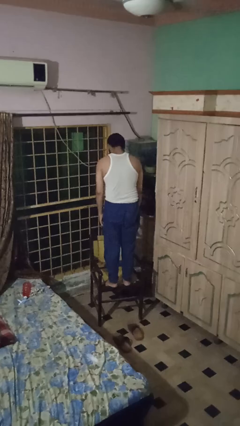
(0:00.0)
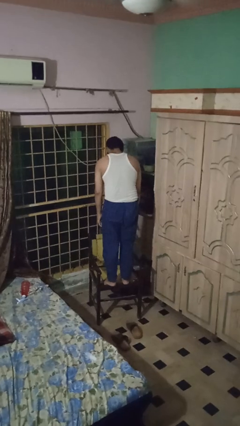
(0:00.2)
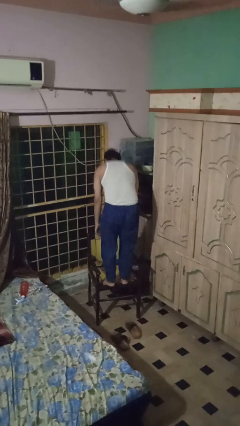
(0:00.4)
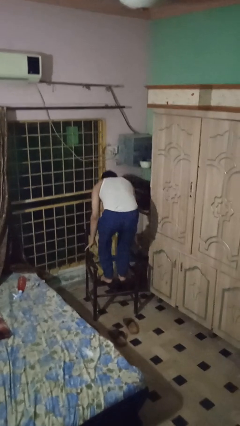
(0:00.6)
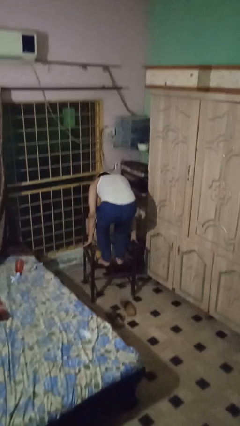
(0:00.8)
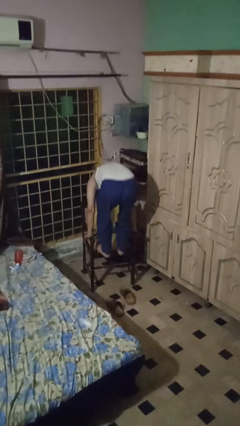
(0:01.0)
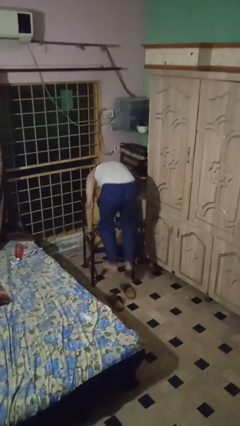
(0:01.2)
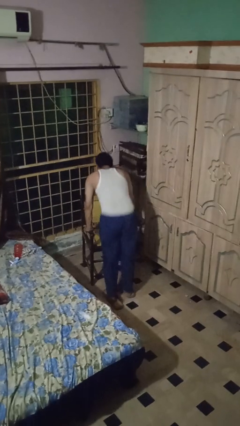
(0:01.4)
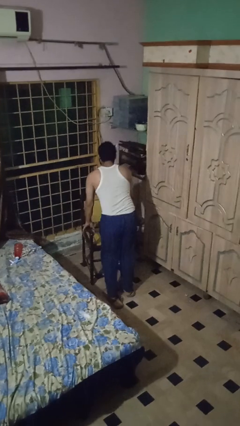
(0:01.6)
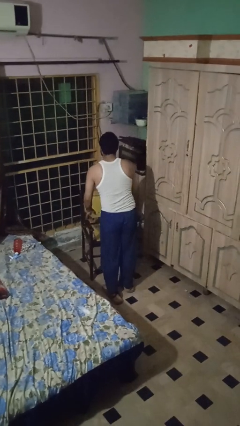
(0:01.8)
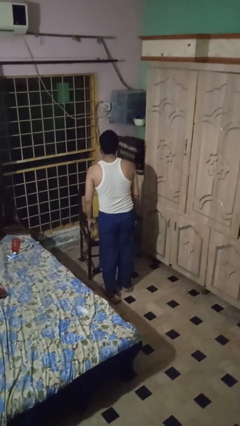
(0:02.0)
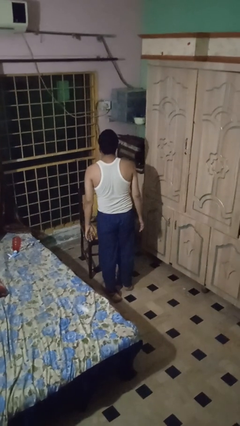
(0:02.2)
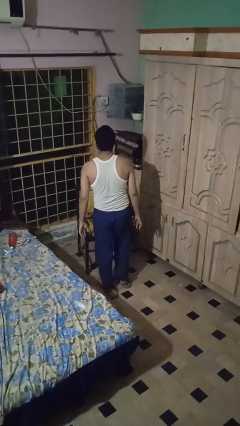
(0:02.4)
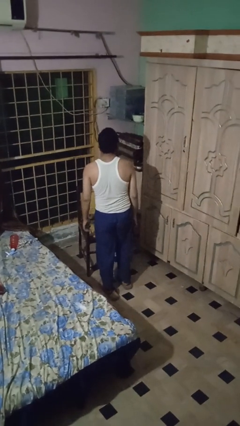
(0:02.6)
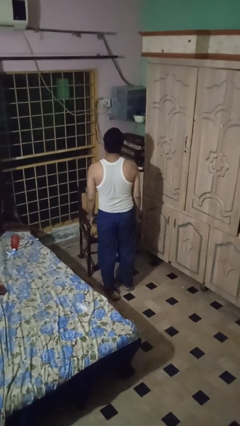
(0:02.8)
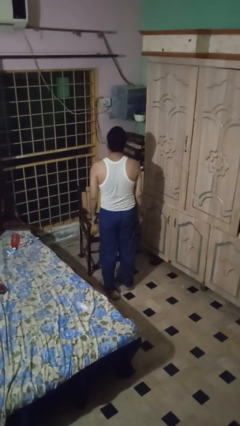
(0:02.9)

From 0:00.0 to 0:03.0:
person climbs off chair

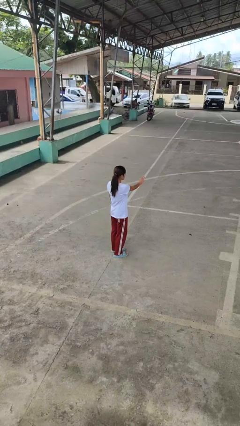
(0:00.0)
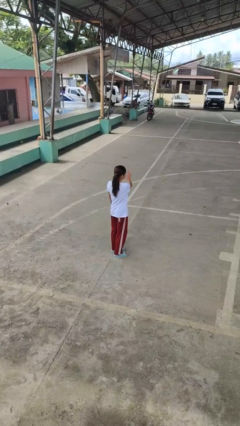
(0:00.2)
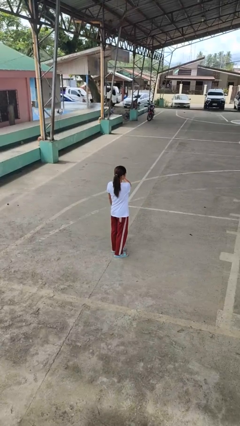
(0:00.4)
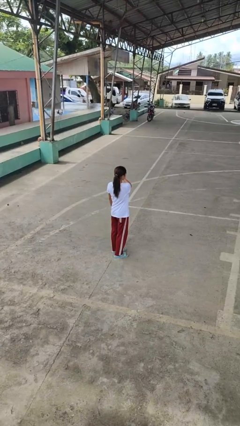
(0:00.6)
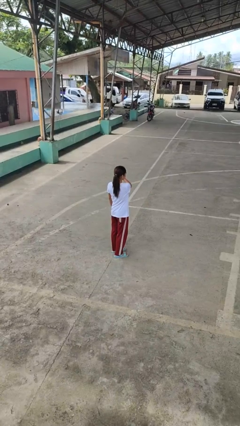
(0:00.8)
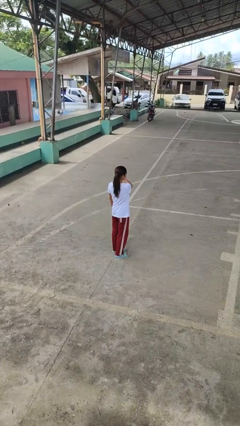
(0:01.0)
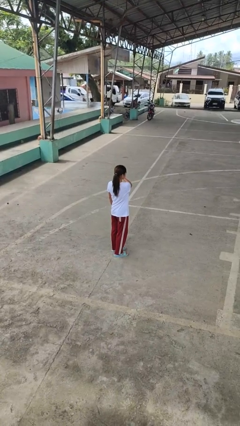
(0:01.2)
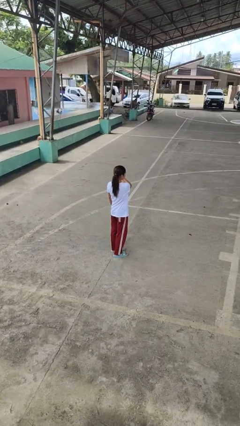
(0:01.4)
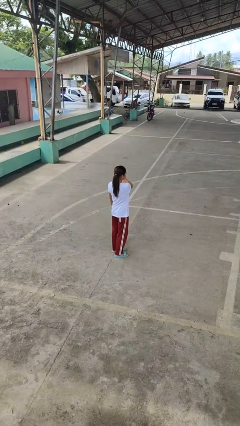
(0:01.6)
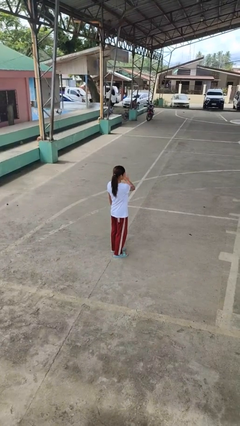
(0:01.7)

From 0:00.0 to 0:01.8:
person gestures swipe left

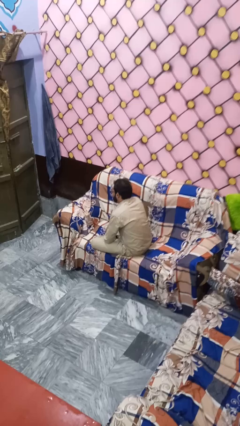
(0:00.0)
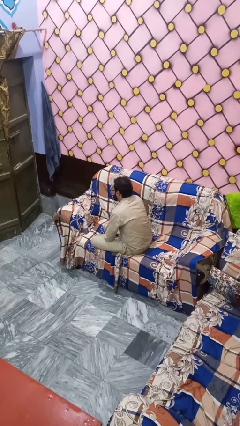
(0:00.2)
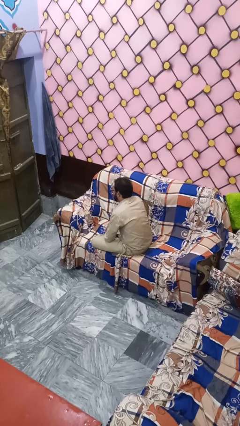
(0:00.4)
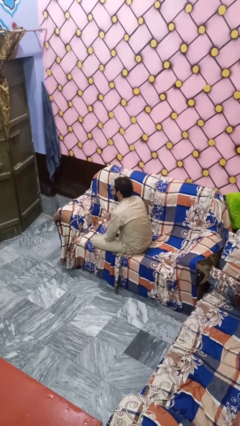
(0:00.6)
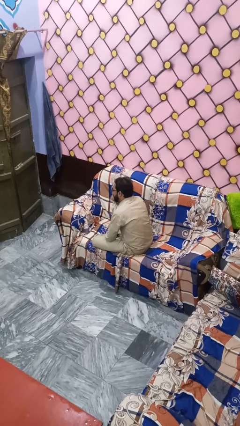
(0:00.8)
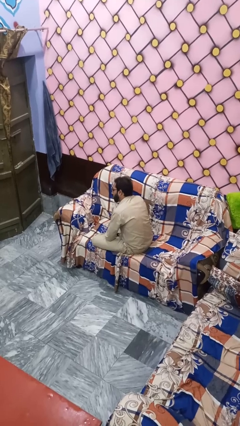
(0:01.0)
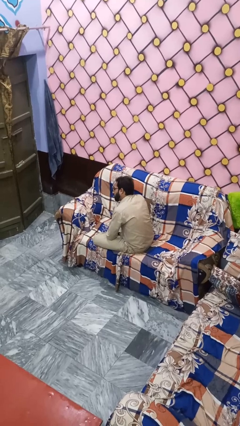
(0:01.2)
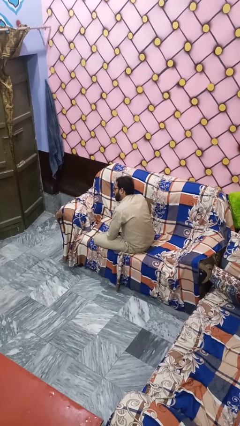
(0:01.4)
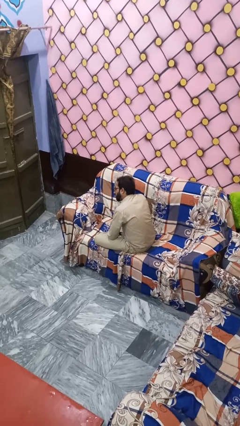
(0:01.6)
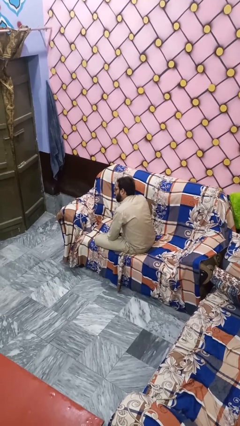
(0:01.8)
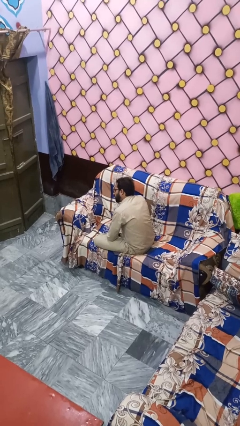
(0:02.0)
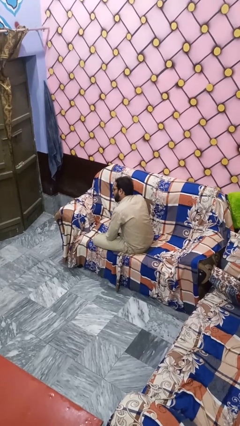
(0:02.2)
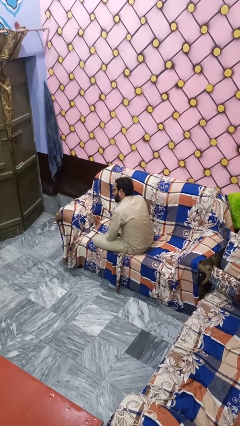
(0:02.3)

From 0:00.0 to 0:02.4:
person sticks out tongue

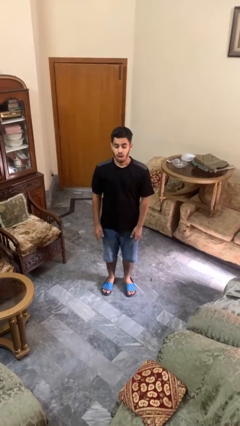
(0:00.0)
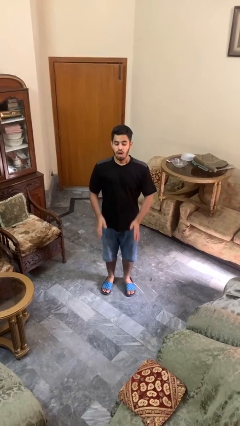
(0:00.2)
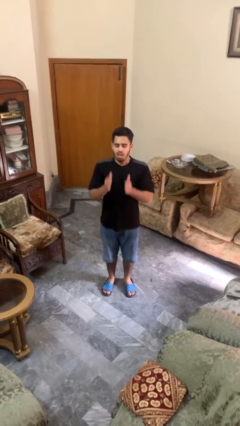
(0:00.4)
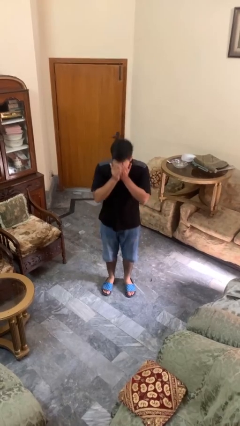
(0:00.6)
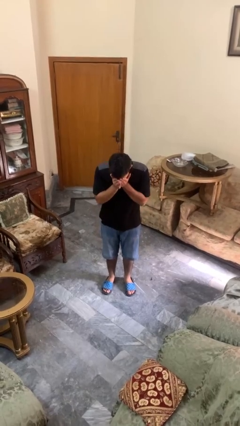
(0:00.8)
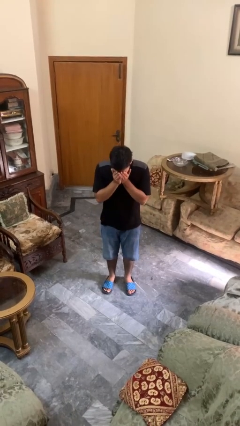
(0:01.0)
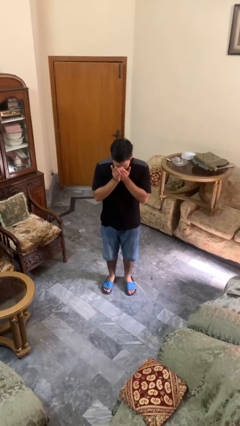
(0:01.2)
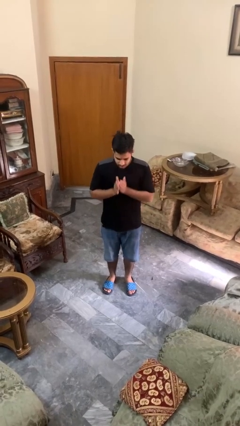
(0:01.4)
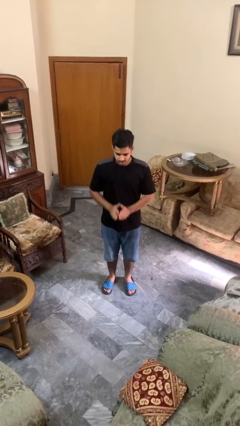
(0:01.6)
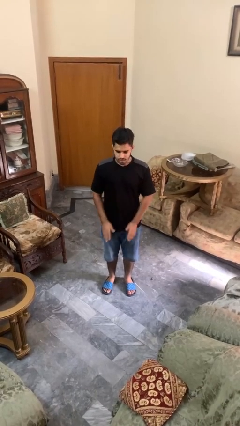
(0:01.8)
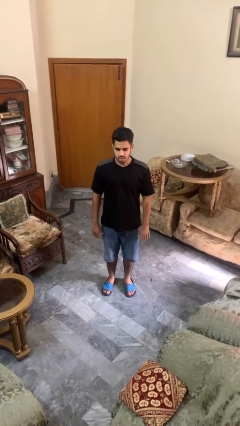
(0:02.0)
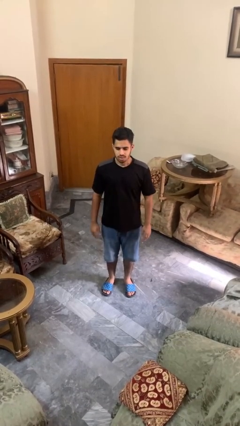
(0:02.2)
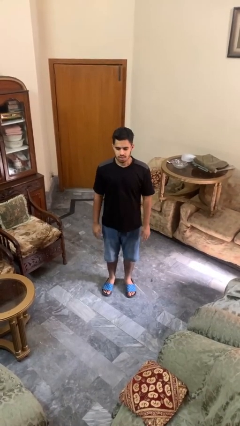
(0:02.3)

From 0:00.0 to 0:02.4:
person sneezes into hand

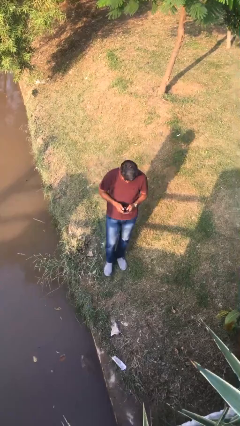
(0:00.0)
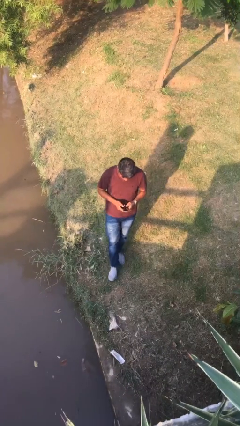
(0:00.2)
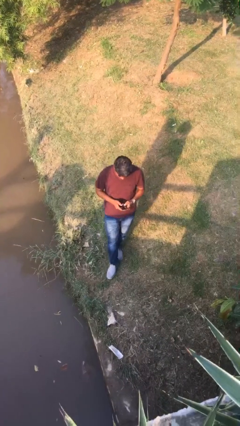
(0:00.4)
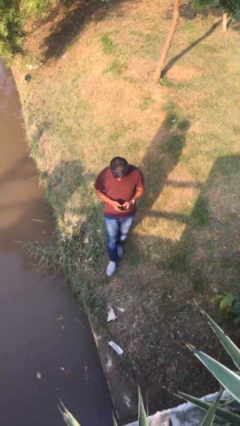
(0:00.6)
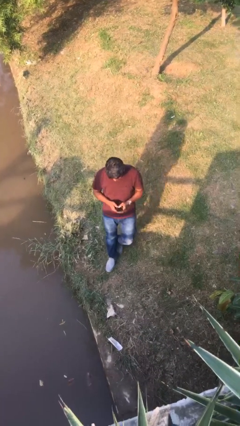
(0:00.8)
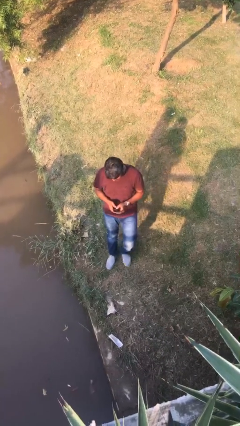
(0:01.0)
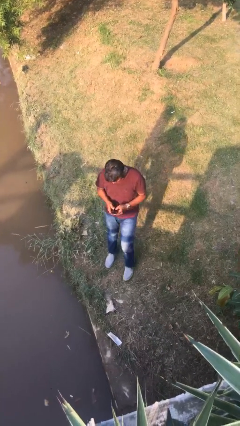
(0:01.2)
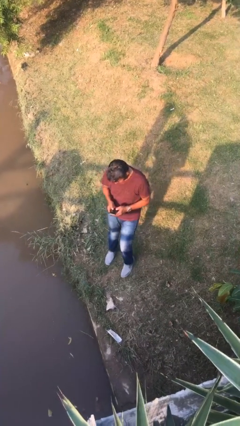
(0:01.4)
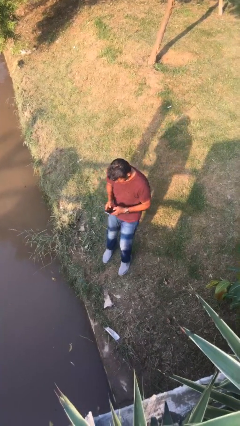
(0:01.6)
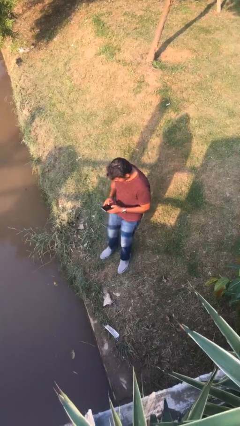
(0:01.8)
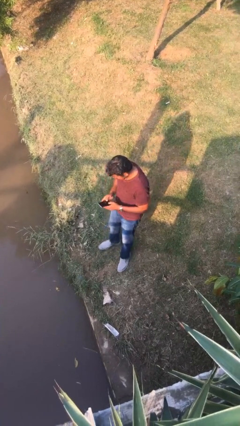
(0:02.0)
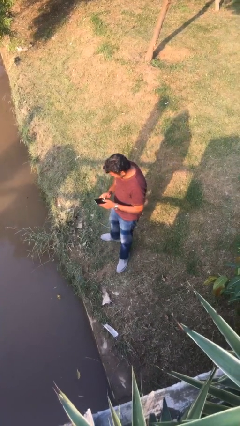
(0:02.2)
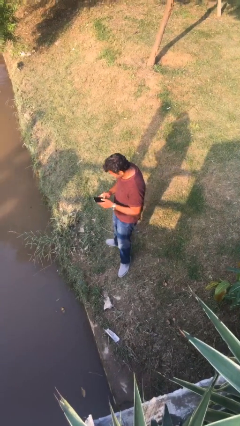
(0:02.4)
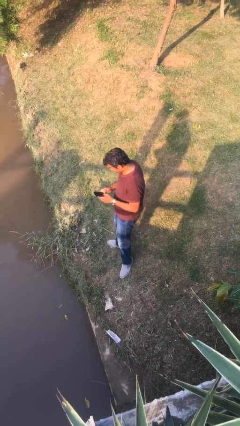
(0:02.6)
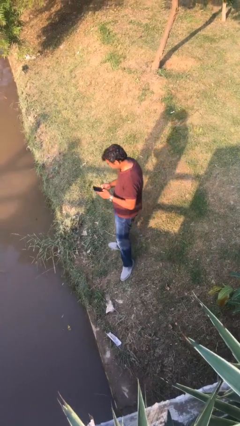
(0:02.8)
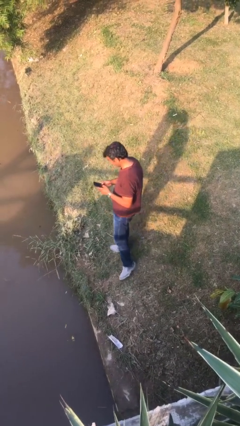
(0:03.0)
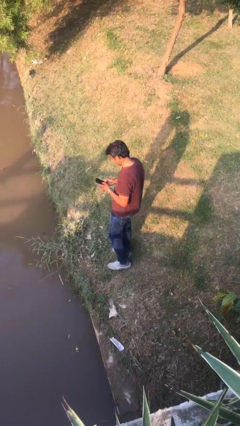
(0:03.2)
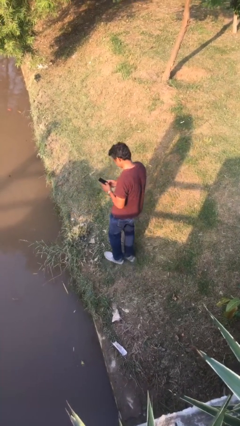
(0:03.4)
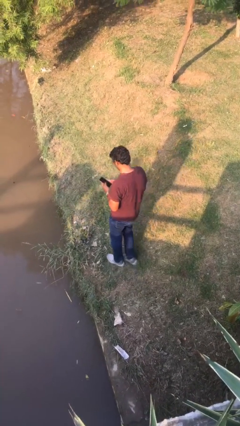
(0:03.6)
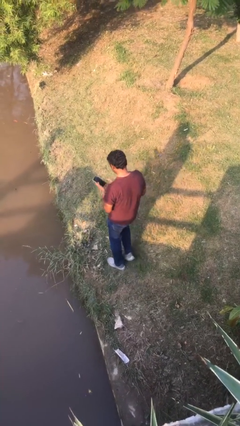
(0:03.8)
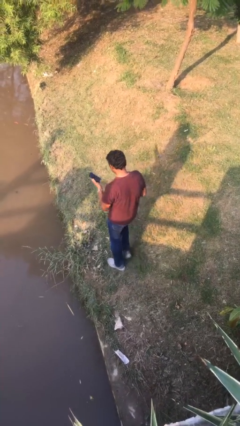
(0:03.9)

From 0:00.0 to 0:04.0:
person texts on phone

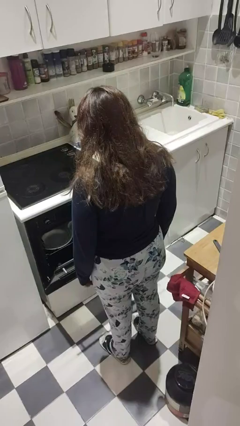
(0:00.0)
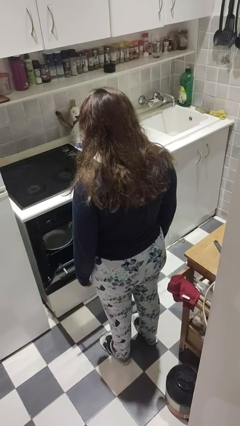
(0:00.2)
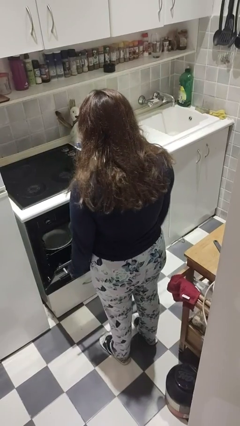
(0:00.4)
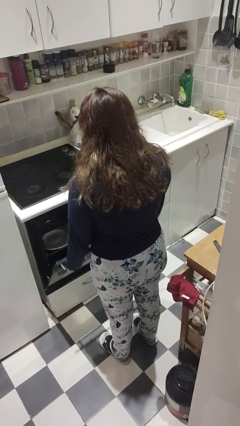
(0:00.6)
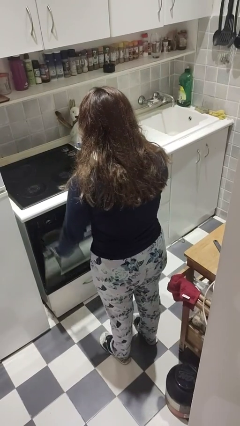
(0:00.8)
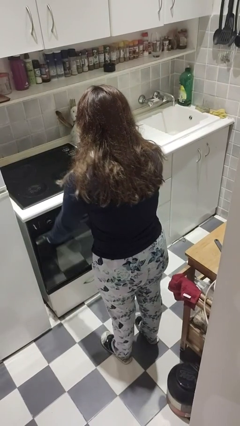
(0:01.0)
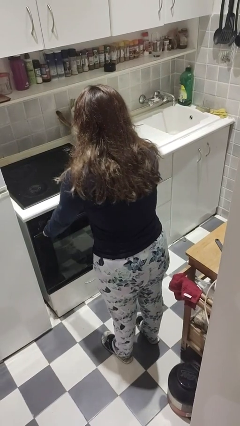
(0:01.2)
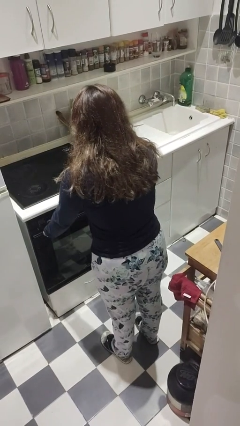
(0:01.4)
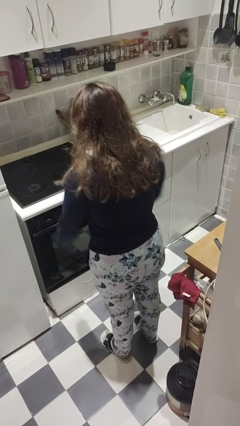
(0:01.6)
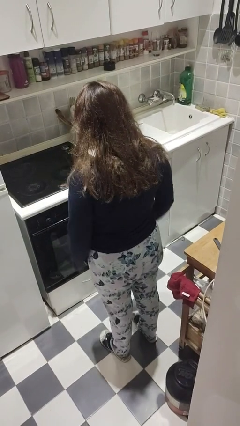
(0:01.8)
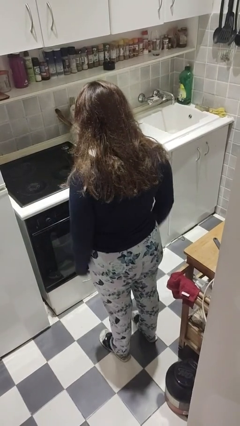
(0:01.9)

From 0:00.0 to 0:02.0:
person closes dishwasher

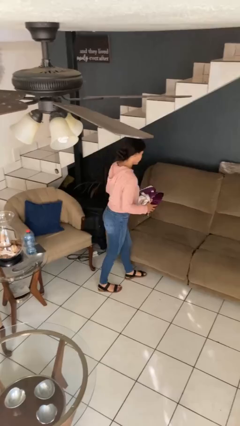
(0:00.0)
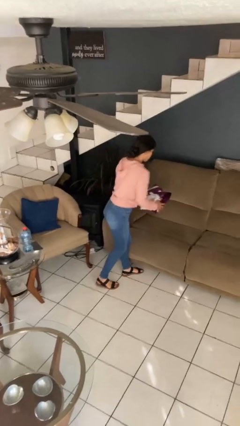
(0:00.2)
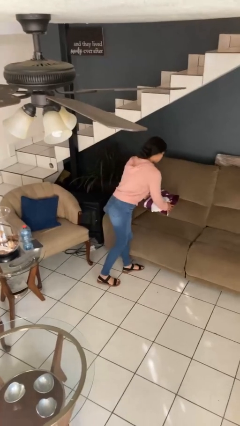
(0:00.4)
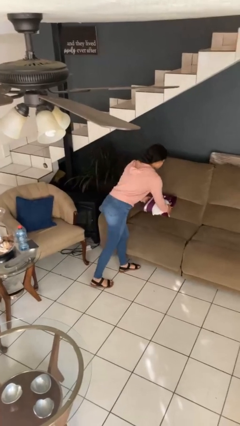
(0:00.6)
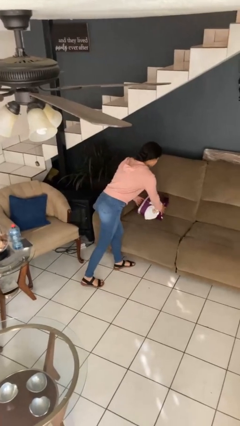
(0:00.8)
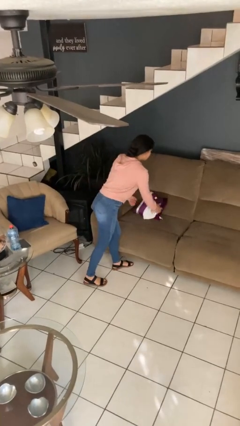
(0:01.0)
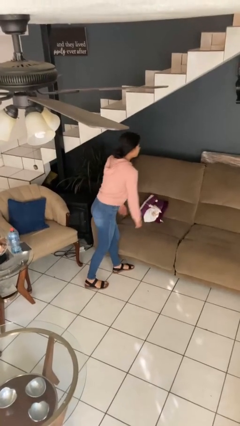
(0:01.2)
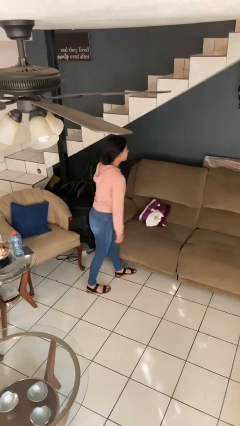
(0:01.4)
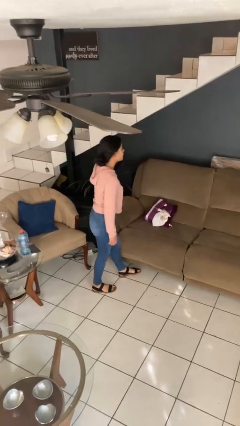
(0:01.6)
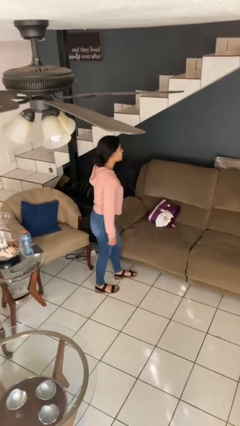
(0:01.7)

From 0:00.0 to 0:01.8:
person puts down object on couch
